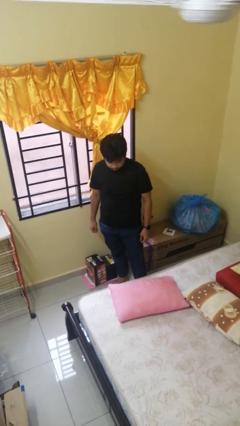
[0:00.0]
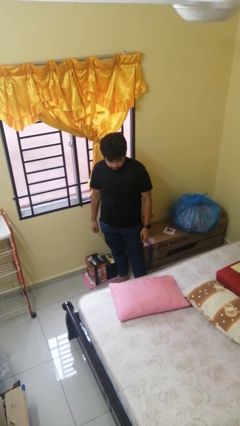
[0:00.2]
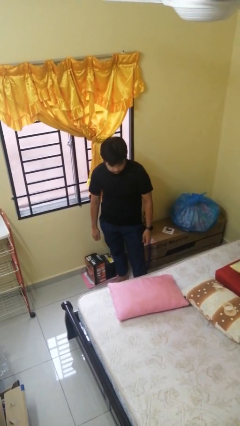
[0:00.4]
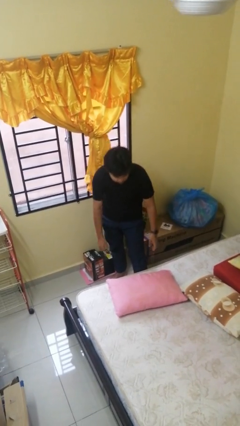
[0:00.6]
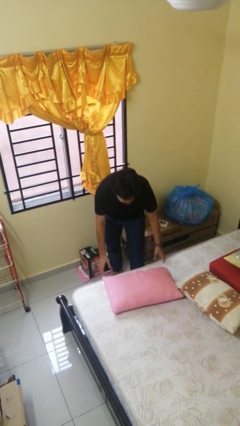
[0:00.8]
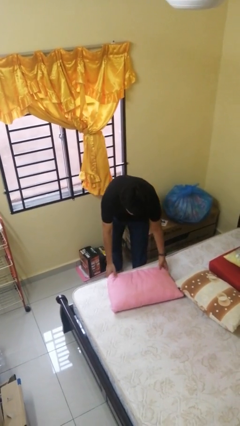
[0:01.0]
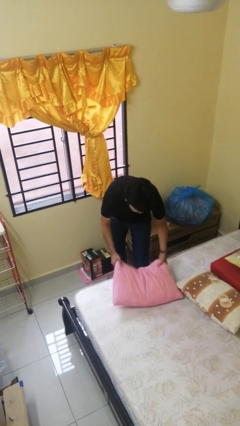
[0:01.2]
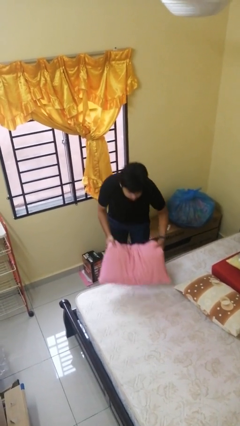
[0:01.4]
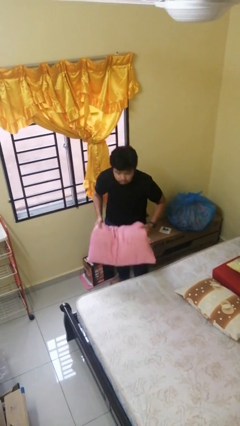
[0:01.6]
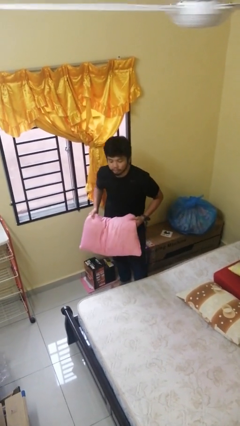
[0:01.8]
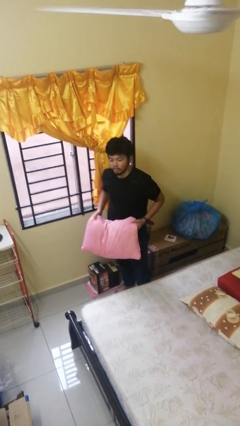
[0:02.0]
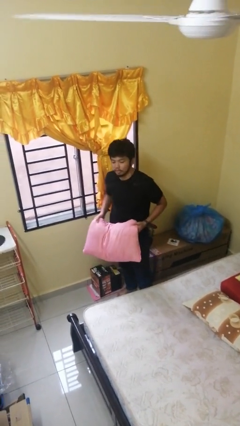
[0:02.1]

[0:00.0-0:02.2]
person picks up object from bed

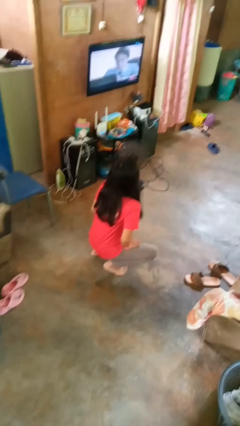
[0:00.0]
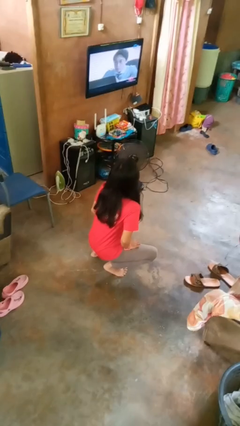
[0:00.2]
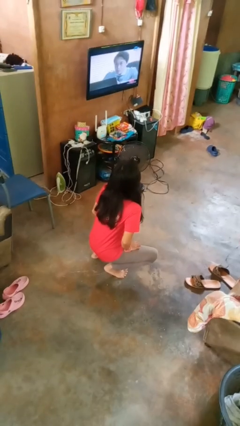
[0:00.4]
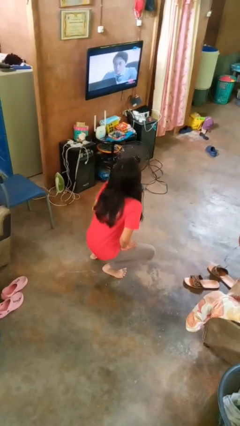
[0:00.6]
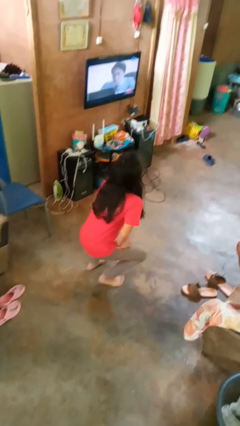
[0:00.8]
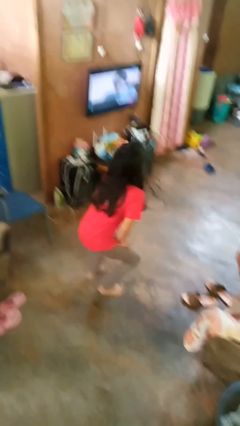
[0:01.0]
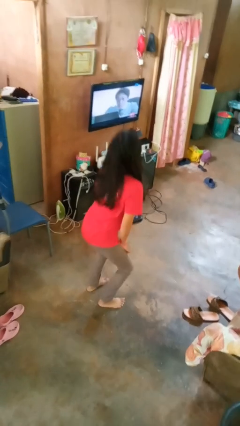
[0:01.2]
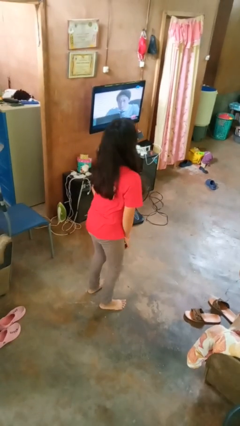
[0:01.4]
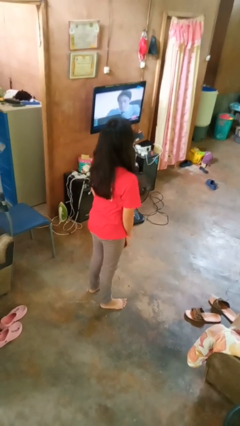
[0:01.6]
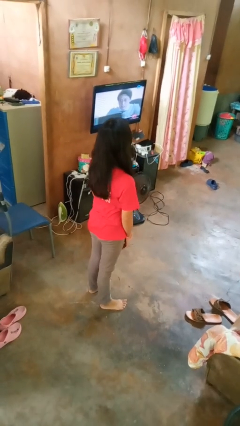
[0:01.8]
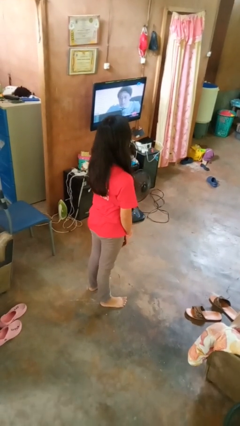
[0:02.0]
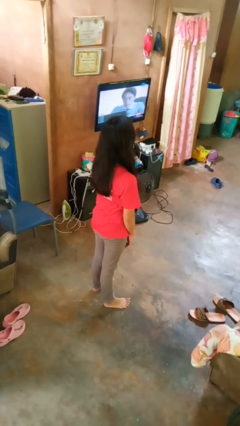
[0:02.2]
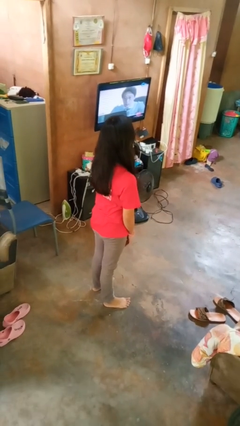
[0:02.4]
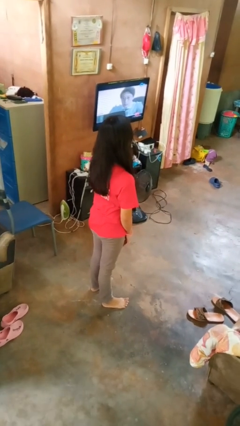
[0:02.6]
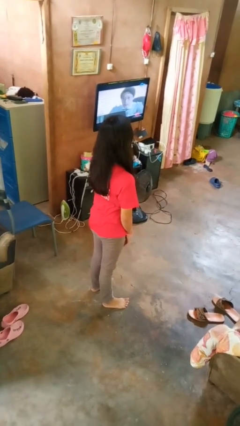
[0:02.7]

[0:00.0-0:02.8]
person stands up

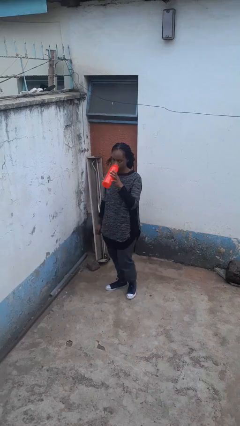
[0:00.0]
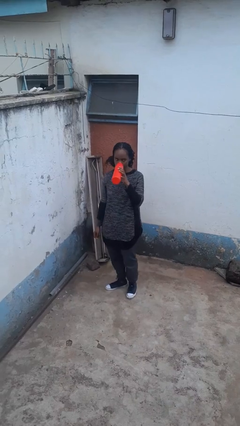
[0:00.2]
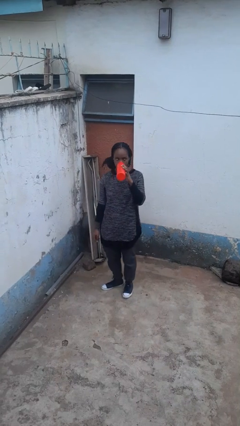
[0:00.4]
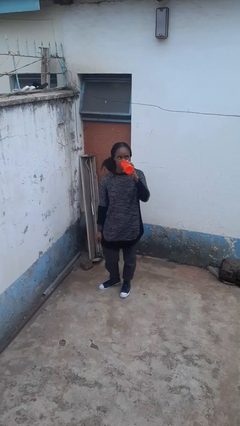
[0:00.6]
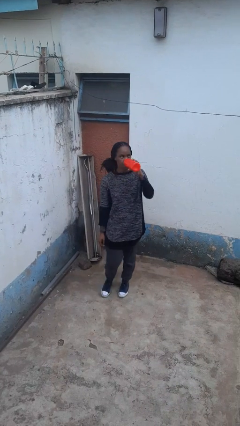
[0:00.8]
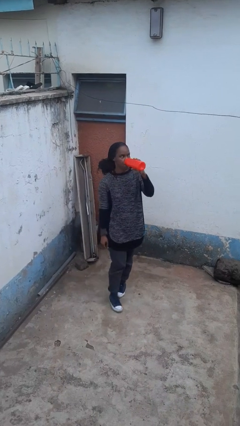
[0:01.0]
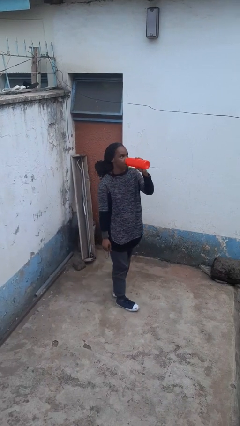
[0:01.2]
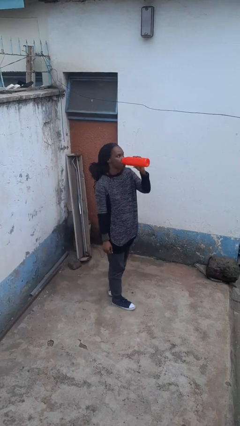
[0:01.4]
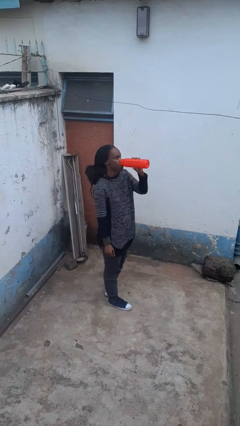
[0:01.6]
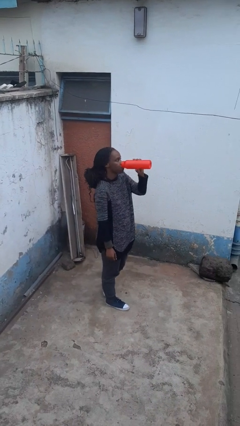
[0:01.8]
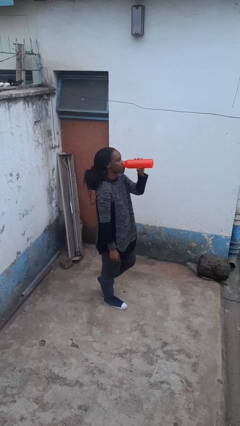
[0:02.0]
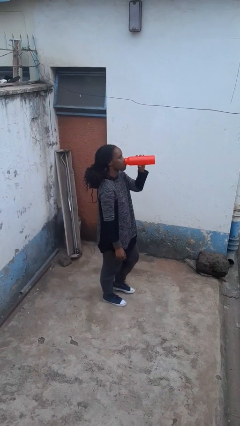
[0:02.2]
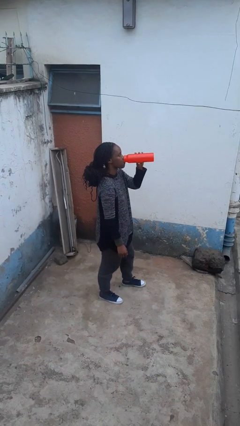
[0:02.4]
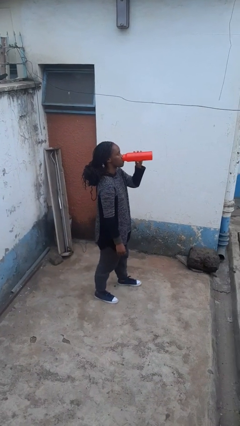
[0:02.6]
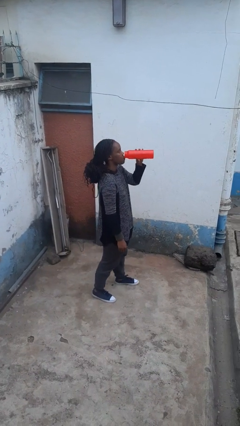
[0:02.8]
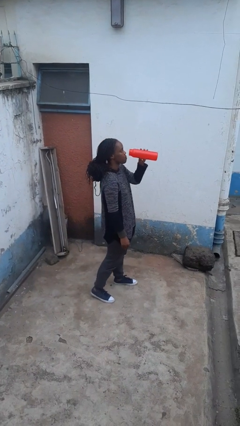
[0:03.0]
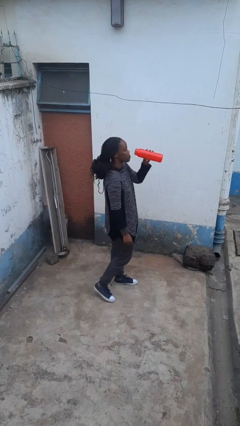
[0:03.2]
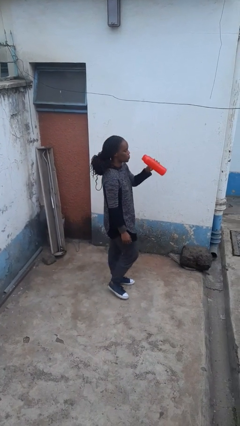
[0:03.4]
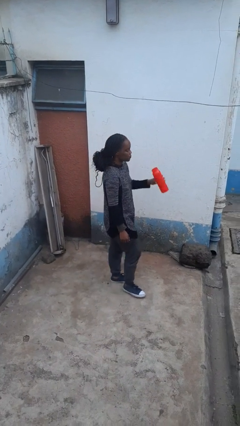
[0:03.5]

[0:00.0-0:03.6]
person drinks from bottle

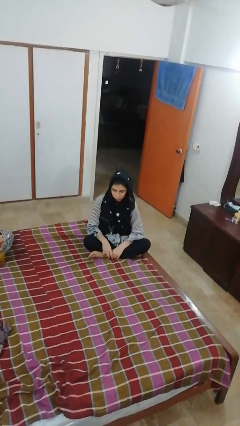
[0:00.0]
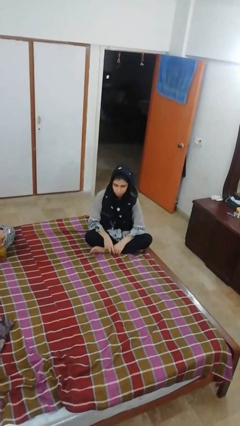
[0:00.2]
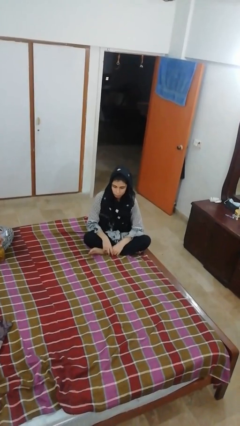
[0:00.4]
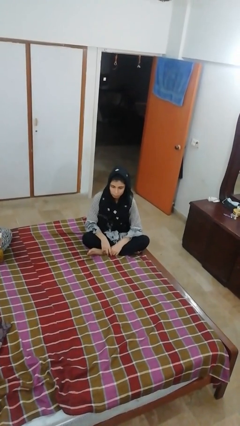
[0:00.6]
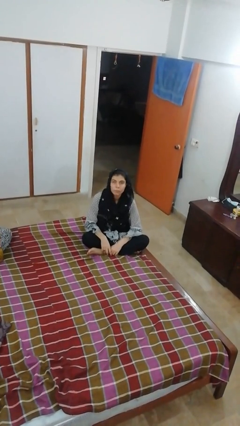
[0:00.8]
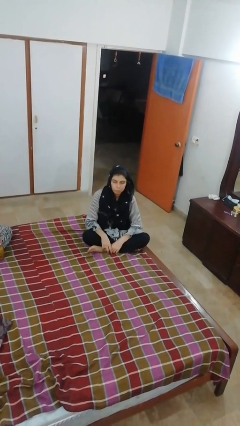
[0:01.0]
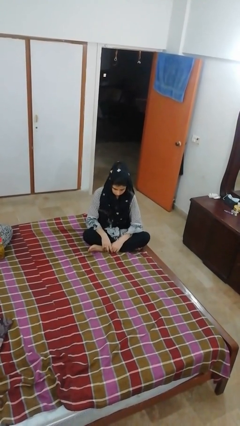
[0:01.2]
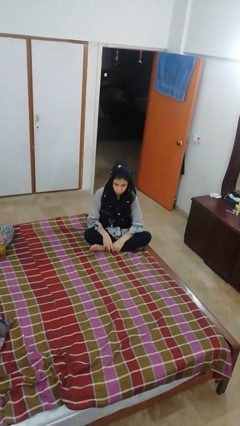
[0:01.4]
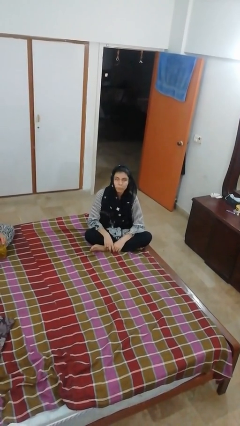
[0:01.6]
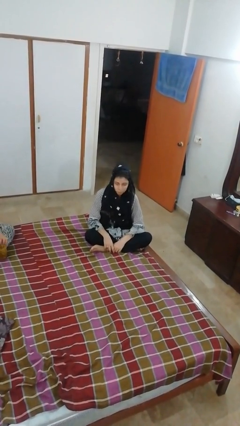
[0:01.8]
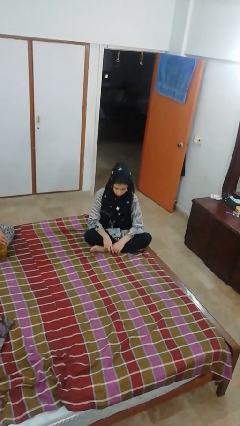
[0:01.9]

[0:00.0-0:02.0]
person nods head

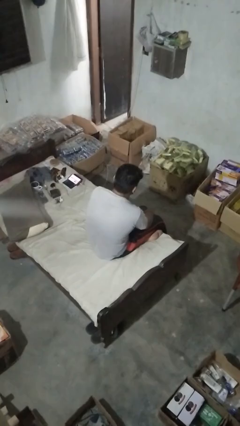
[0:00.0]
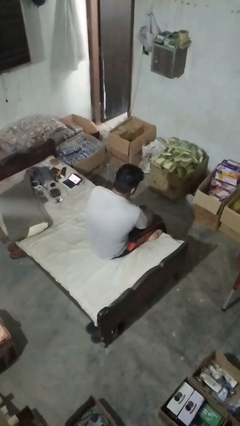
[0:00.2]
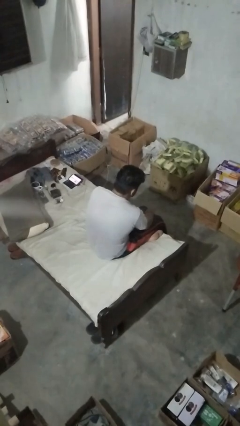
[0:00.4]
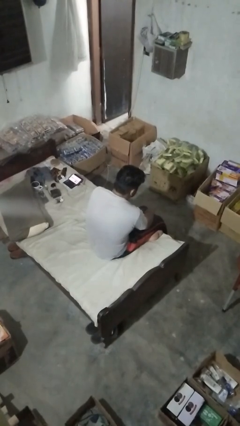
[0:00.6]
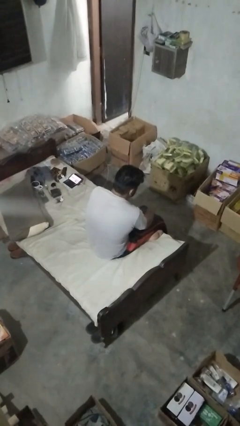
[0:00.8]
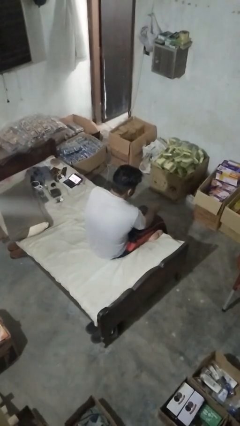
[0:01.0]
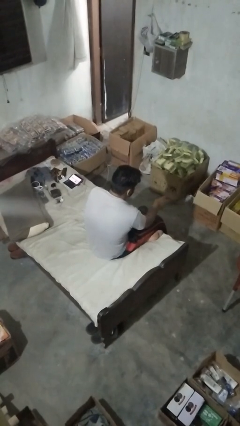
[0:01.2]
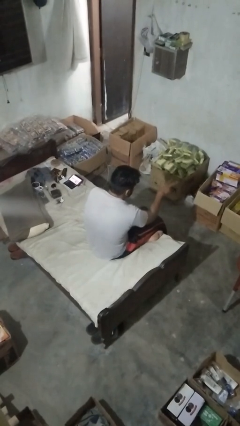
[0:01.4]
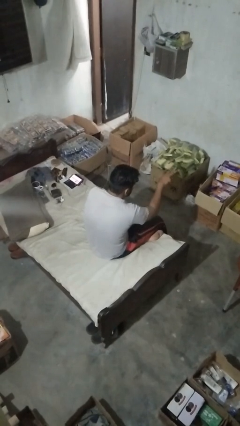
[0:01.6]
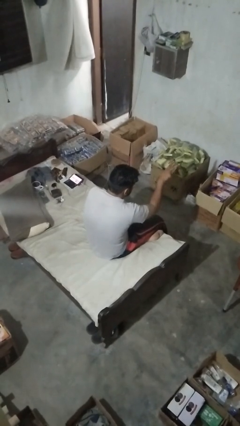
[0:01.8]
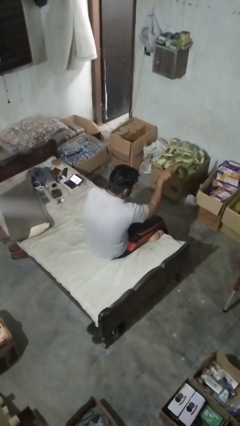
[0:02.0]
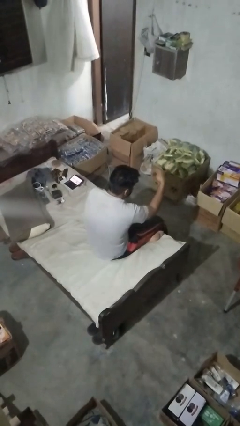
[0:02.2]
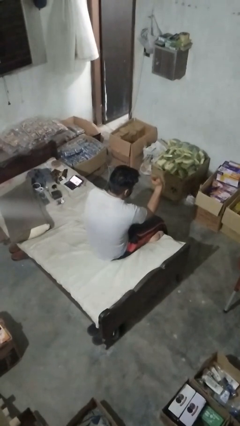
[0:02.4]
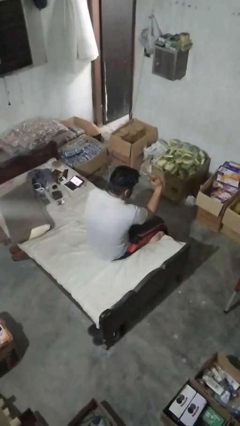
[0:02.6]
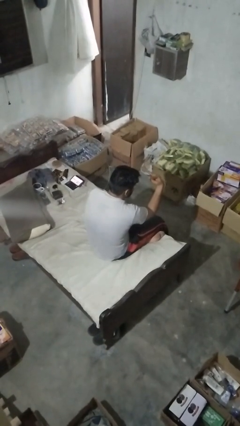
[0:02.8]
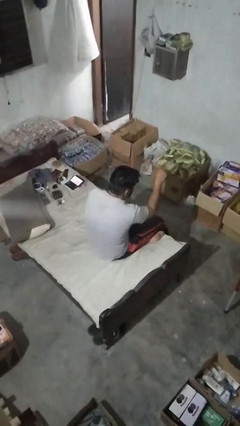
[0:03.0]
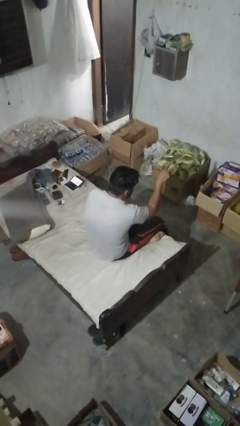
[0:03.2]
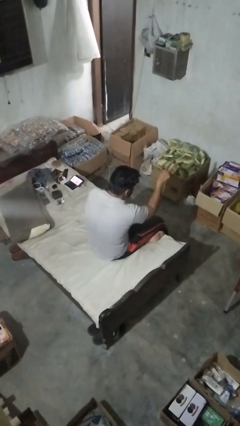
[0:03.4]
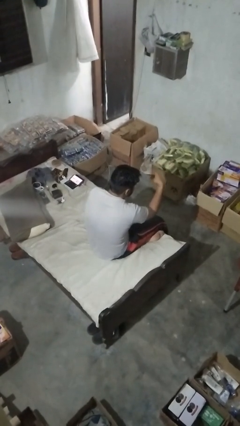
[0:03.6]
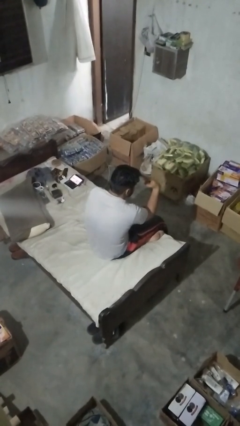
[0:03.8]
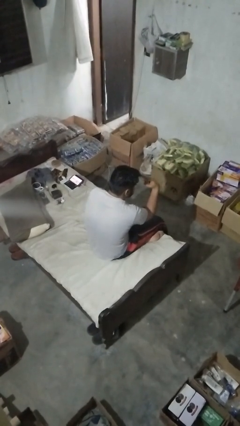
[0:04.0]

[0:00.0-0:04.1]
person gestures watch closely

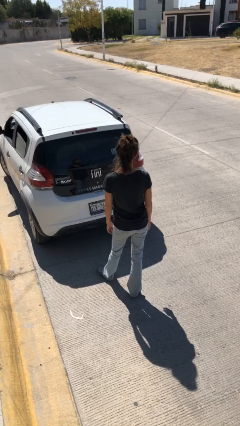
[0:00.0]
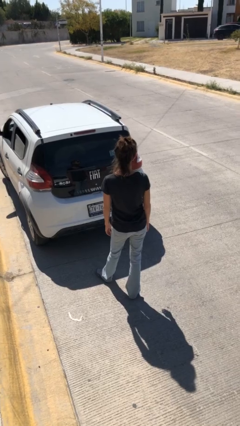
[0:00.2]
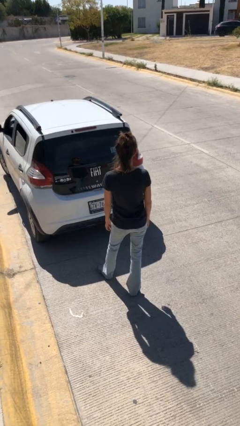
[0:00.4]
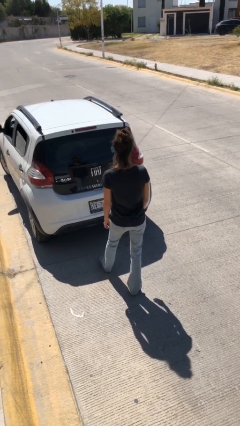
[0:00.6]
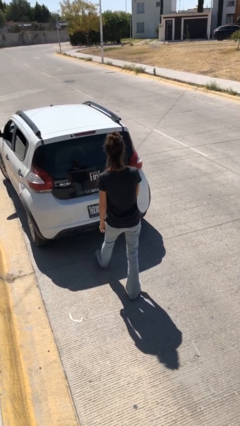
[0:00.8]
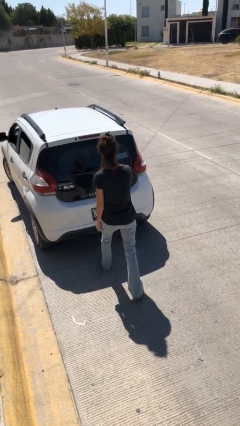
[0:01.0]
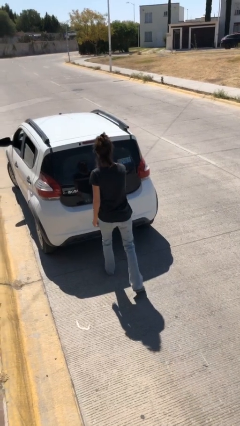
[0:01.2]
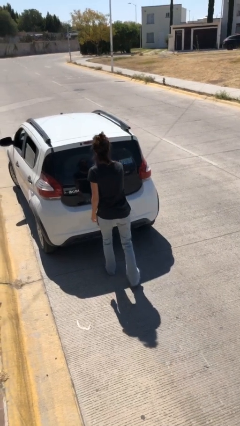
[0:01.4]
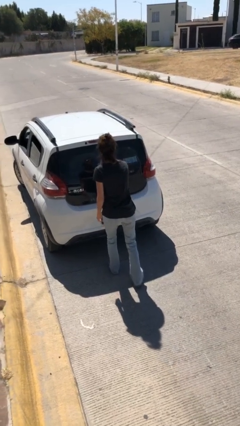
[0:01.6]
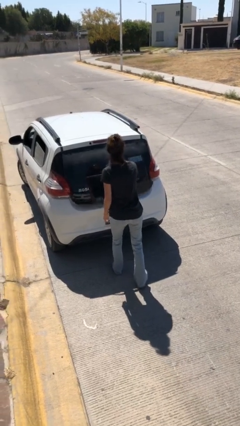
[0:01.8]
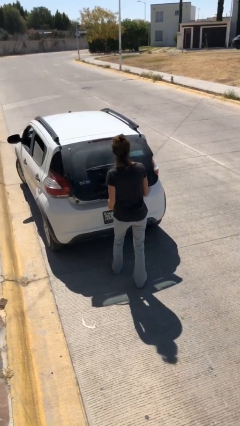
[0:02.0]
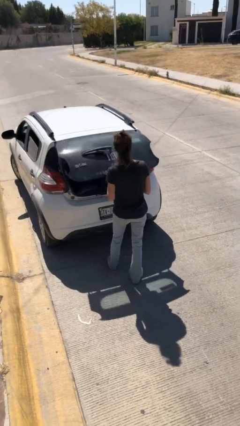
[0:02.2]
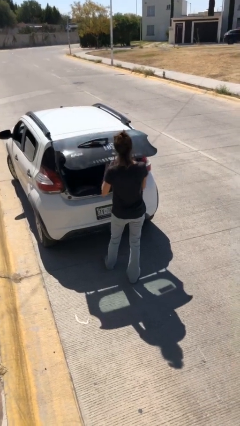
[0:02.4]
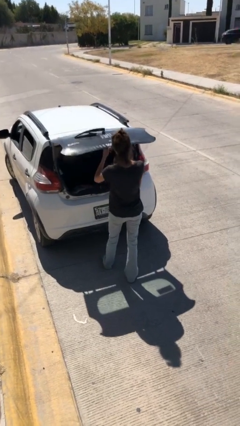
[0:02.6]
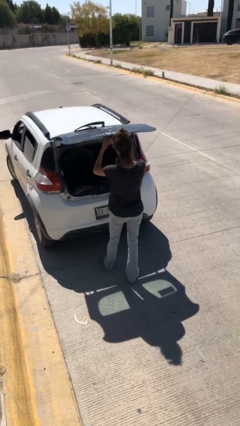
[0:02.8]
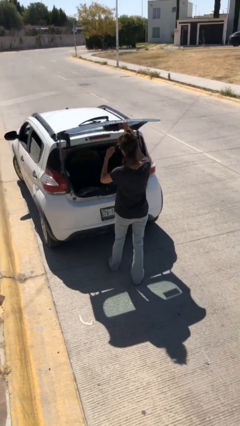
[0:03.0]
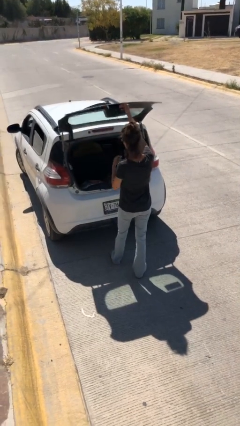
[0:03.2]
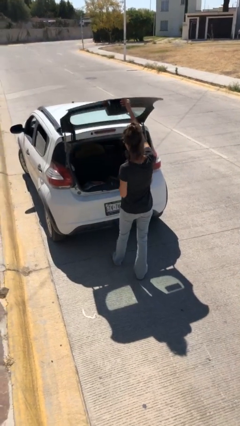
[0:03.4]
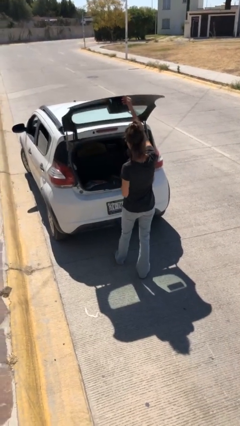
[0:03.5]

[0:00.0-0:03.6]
person opens car trunk
